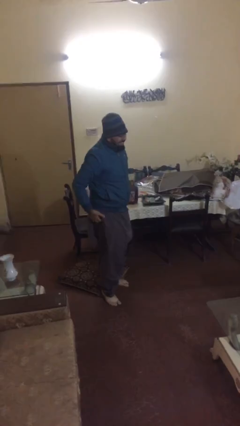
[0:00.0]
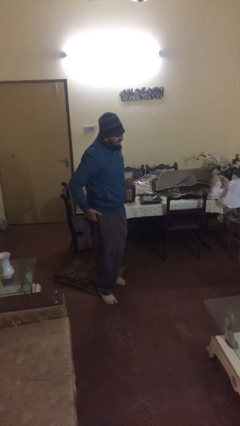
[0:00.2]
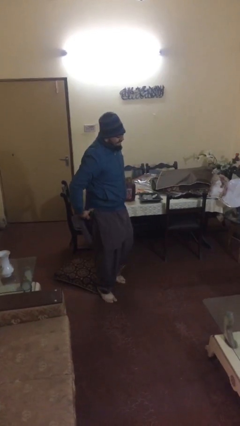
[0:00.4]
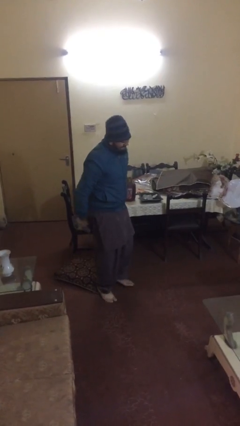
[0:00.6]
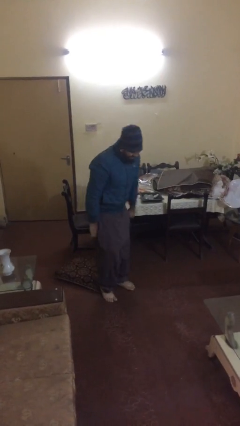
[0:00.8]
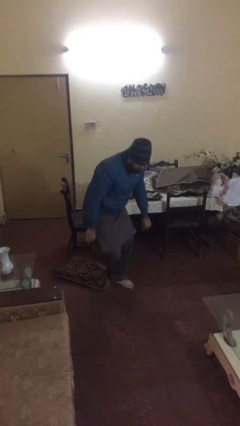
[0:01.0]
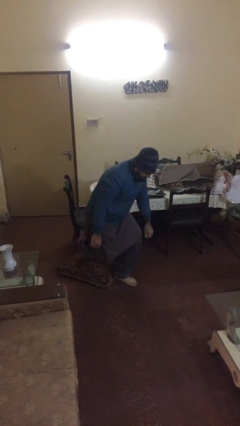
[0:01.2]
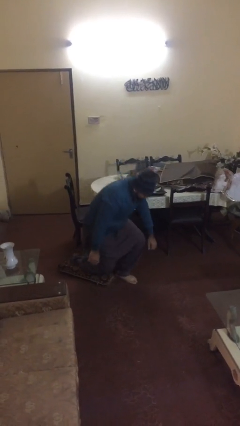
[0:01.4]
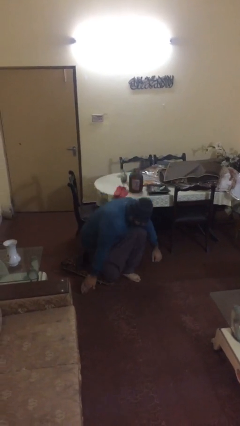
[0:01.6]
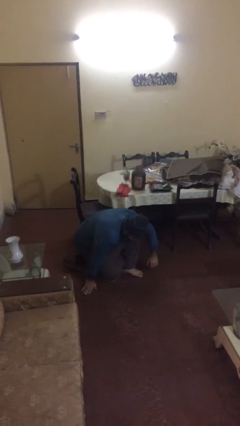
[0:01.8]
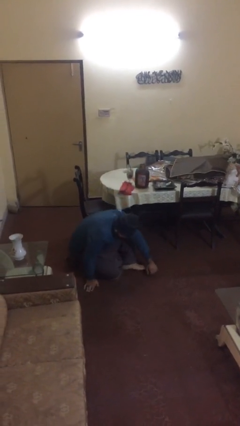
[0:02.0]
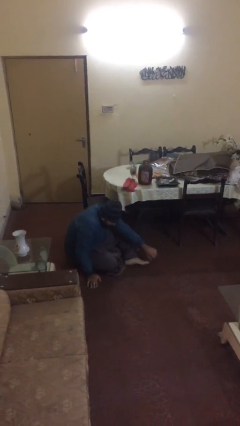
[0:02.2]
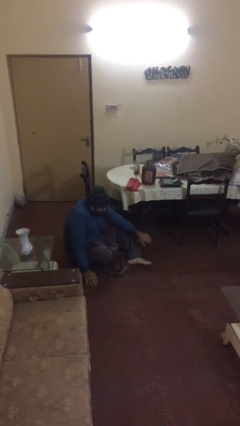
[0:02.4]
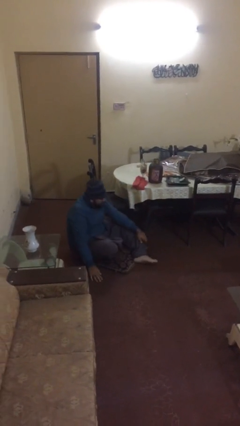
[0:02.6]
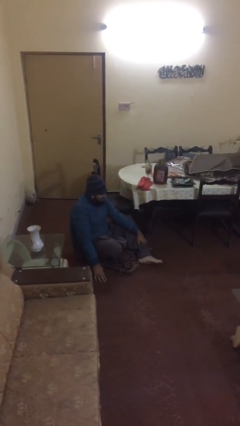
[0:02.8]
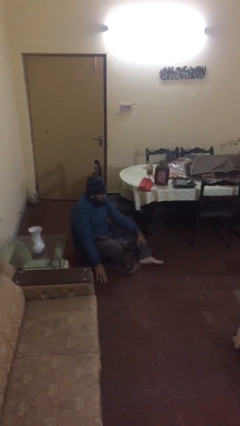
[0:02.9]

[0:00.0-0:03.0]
person sits down

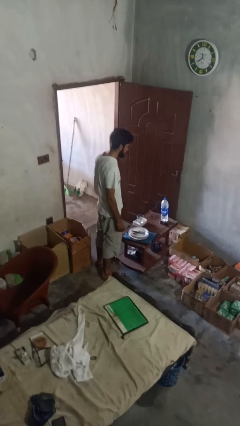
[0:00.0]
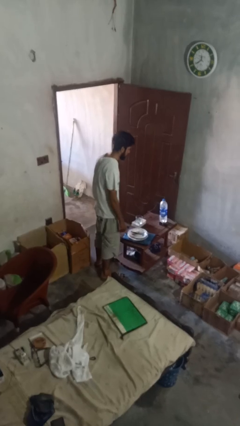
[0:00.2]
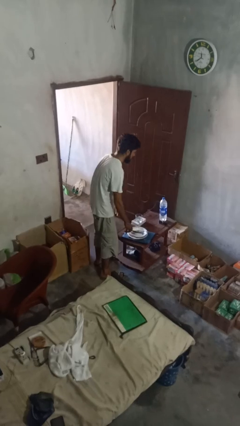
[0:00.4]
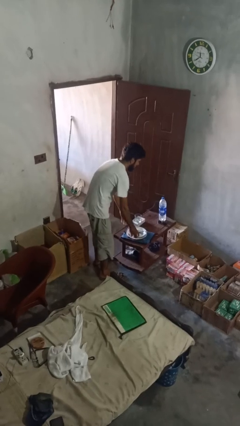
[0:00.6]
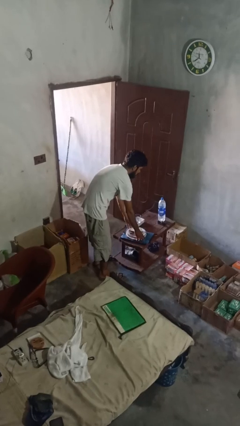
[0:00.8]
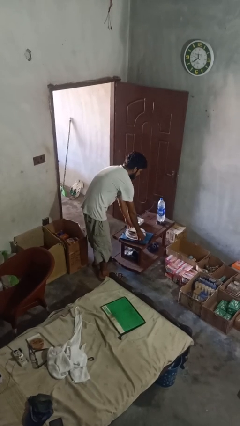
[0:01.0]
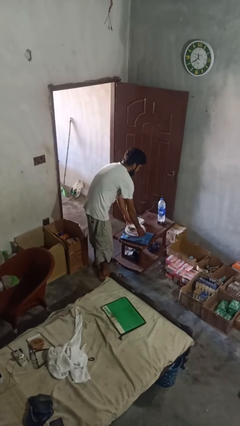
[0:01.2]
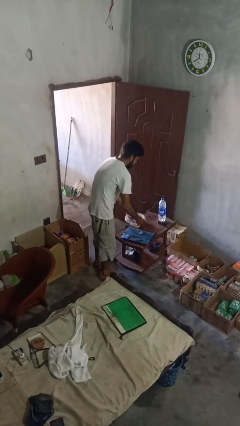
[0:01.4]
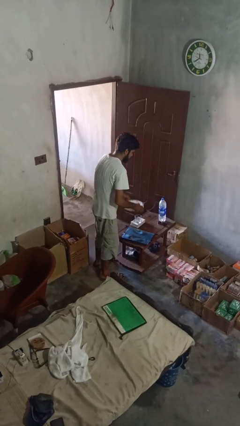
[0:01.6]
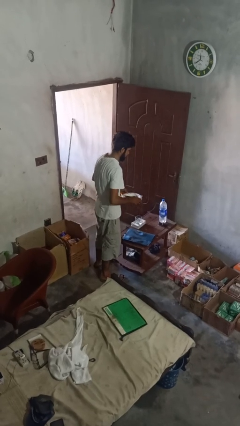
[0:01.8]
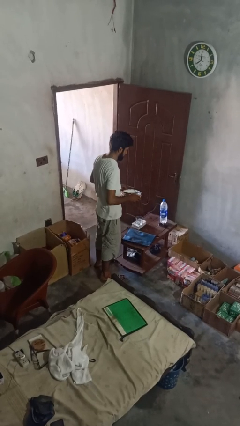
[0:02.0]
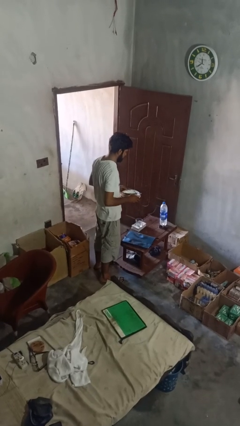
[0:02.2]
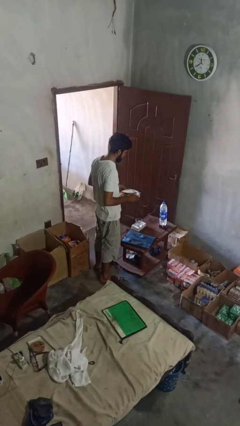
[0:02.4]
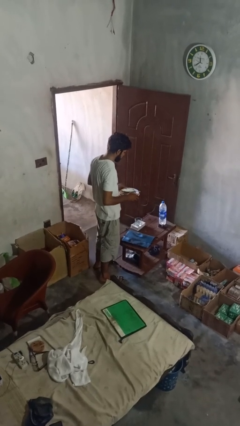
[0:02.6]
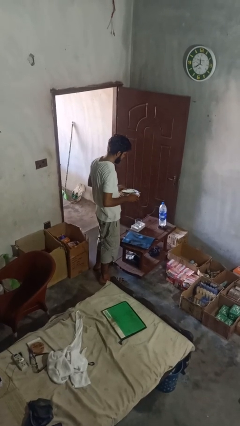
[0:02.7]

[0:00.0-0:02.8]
person picks up object from countertop

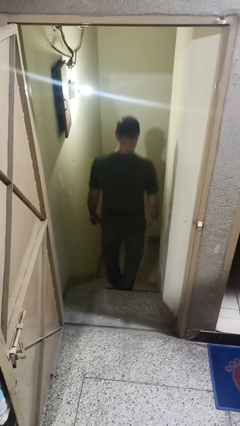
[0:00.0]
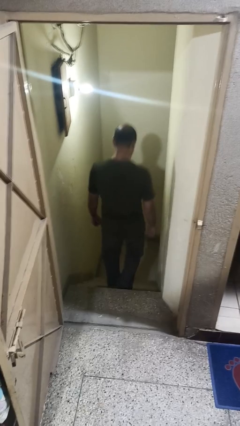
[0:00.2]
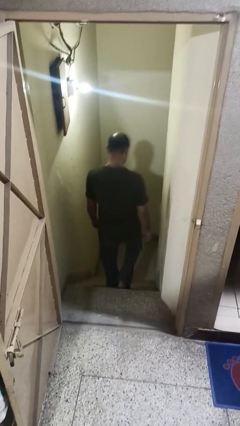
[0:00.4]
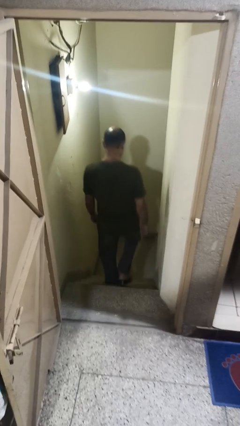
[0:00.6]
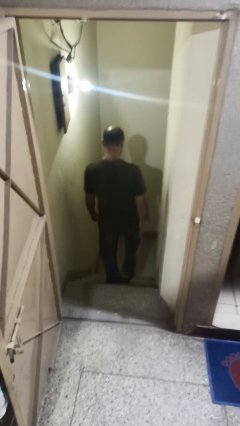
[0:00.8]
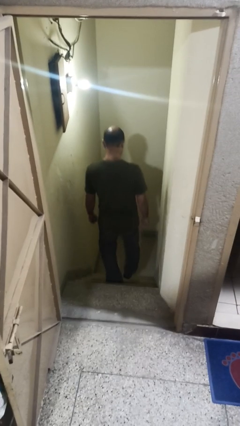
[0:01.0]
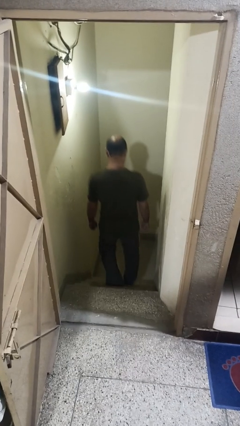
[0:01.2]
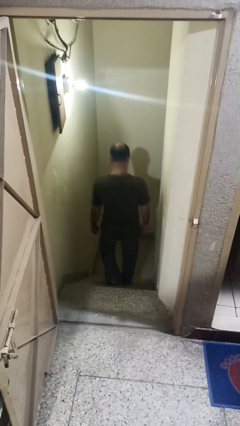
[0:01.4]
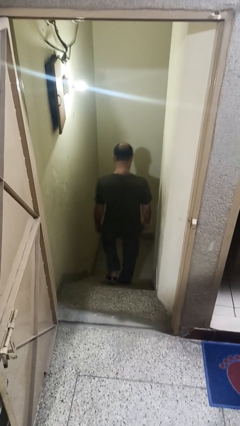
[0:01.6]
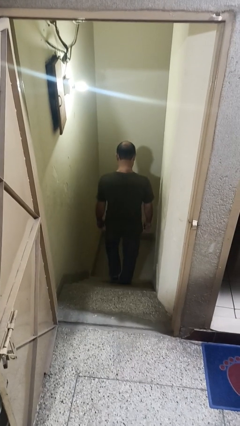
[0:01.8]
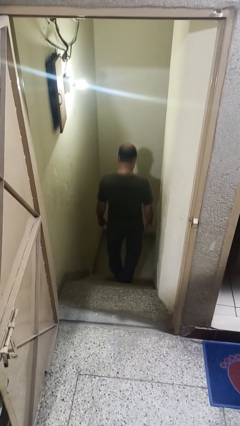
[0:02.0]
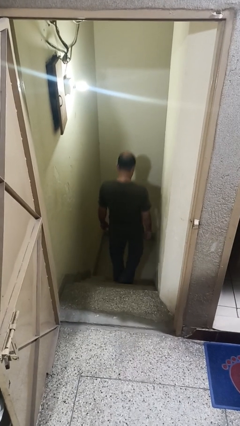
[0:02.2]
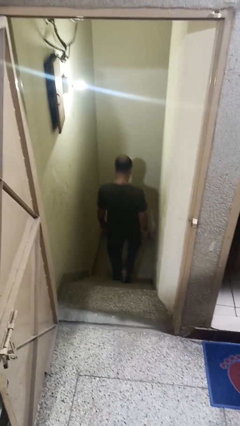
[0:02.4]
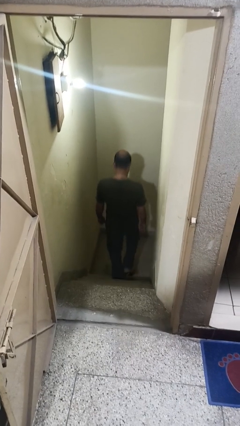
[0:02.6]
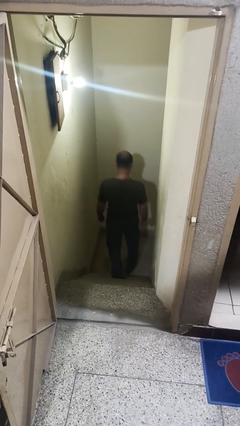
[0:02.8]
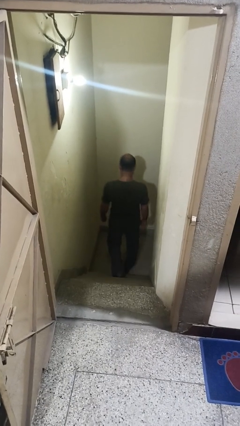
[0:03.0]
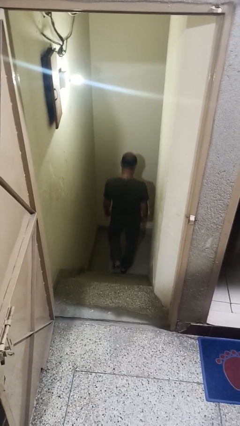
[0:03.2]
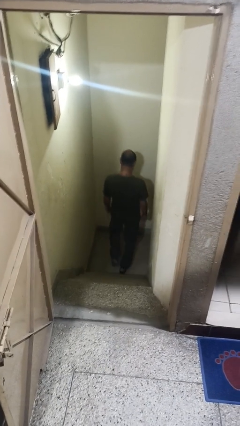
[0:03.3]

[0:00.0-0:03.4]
person climbs down stairs

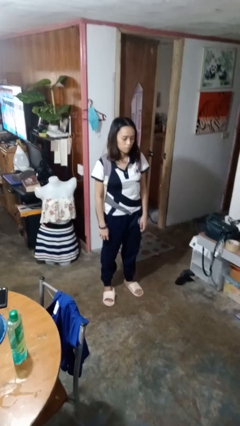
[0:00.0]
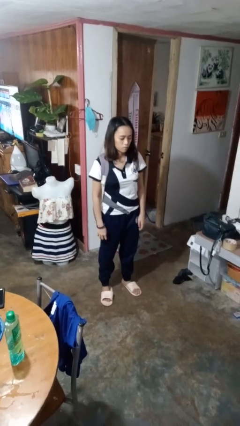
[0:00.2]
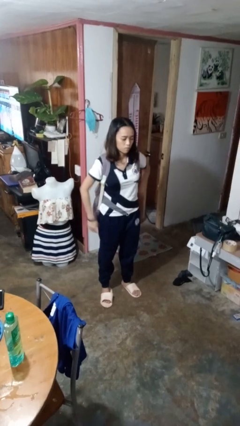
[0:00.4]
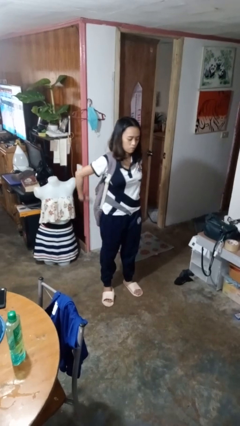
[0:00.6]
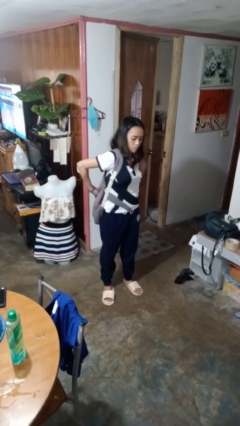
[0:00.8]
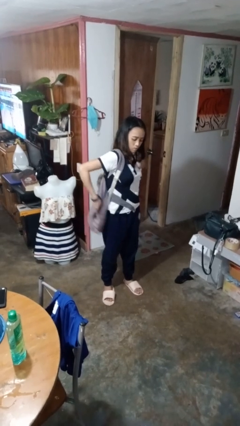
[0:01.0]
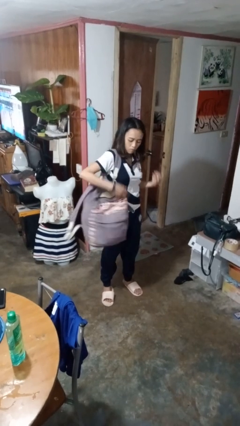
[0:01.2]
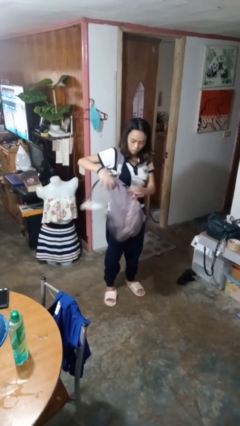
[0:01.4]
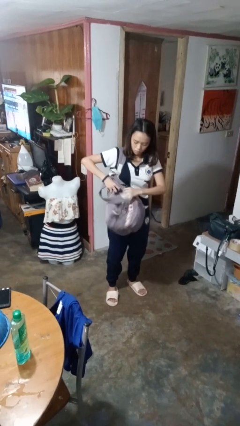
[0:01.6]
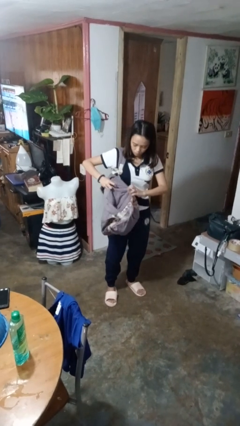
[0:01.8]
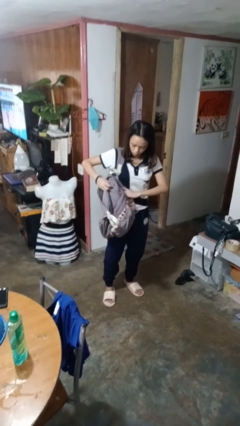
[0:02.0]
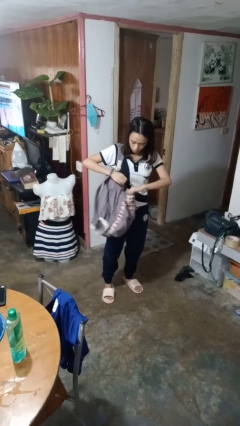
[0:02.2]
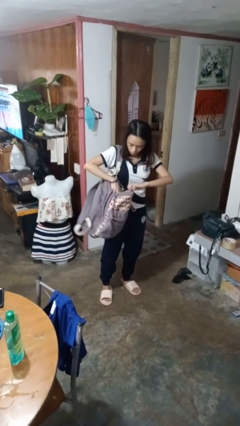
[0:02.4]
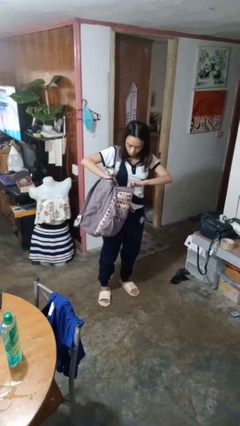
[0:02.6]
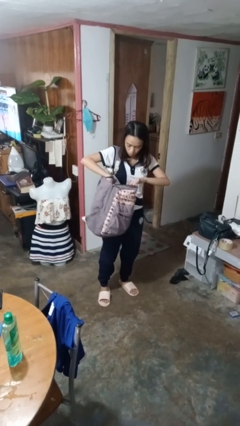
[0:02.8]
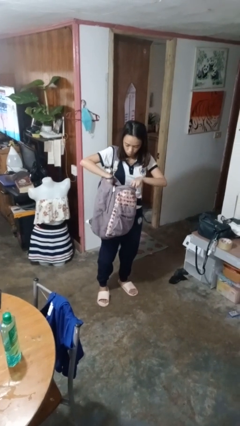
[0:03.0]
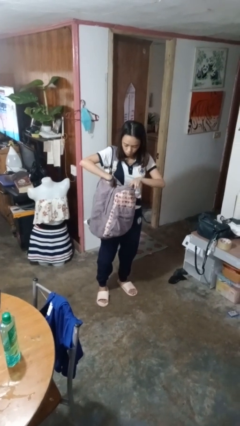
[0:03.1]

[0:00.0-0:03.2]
person searches in backpack

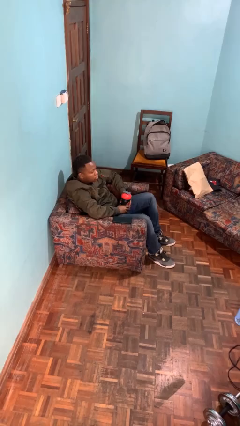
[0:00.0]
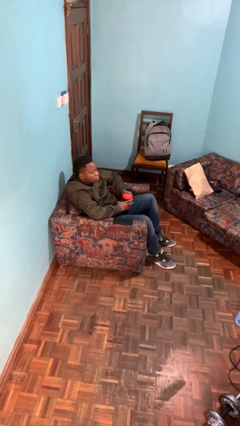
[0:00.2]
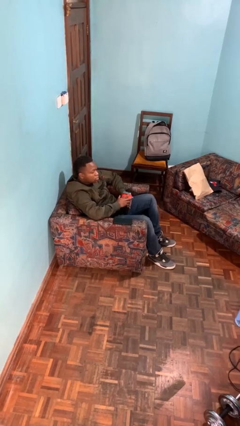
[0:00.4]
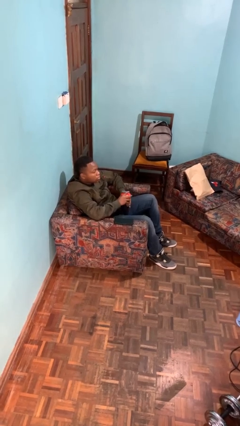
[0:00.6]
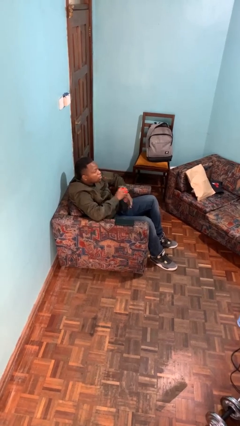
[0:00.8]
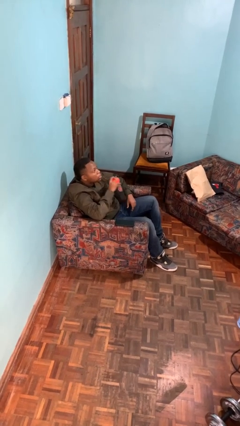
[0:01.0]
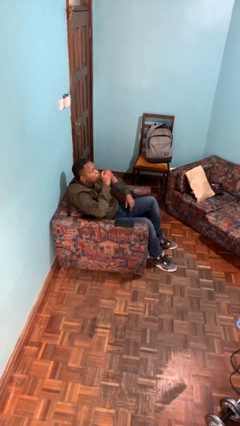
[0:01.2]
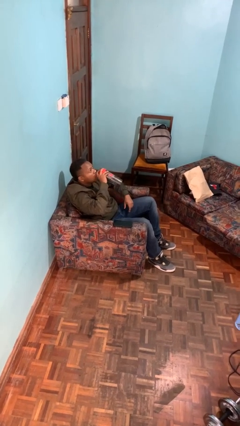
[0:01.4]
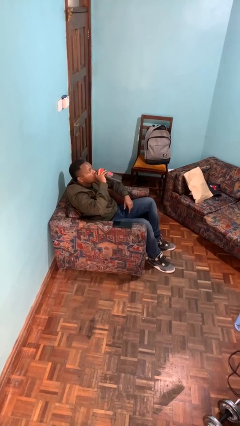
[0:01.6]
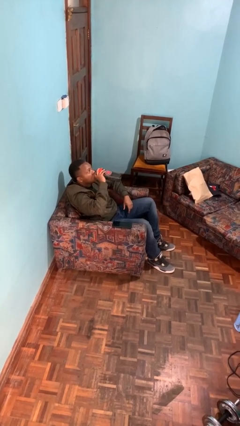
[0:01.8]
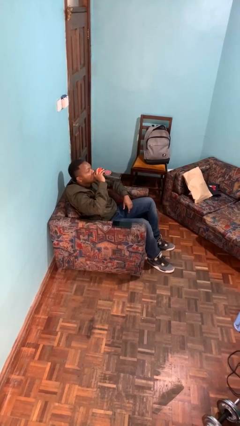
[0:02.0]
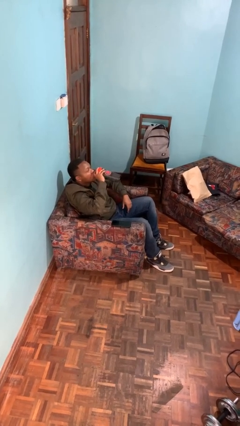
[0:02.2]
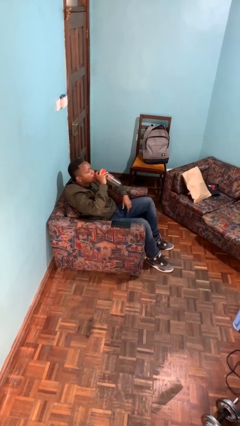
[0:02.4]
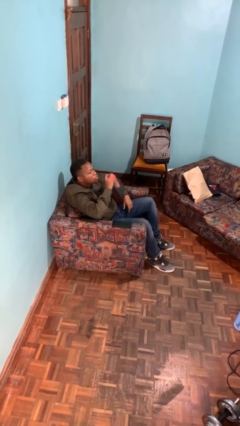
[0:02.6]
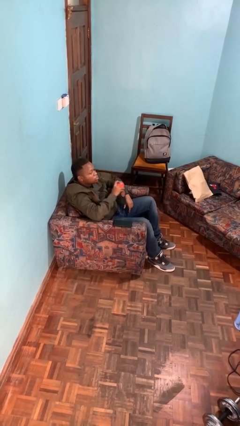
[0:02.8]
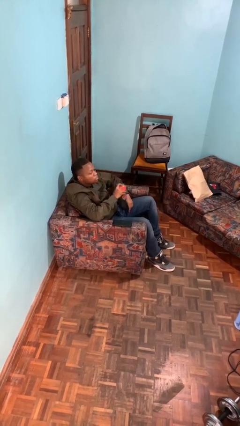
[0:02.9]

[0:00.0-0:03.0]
person drinks from bottle

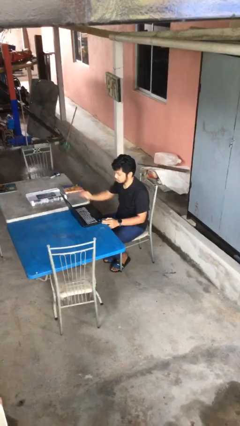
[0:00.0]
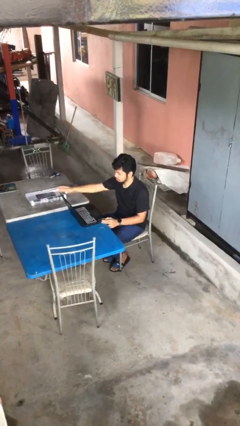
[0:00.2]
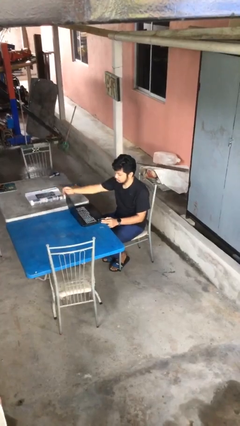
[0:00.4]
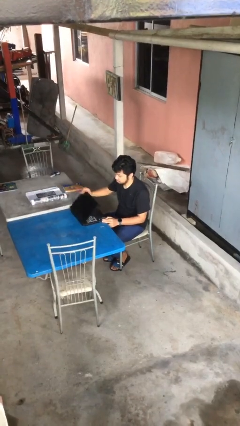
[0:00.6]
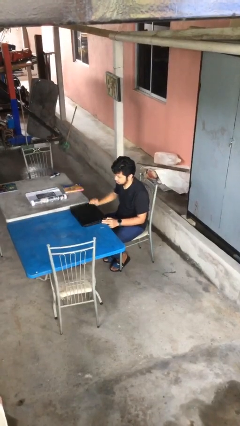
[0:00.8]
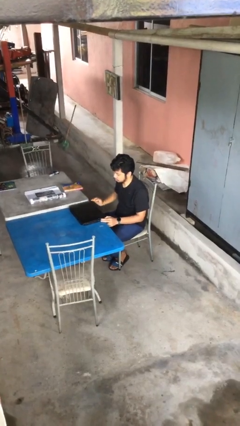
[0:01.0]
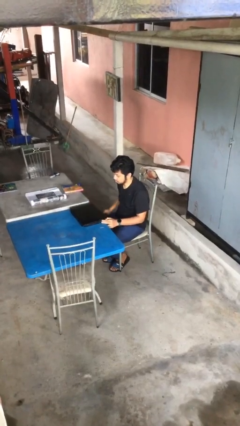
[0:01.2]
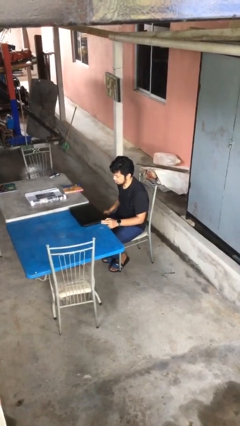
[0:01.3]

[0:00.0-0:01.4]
person closes laptop

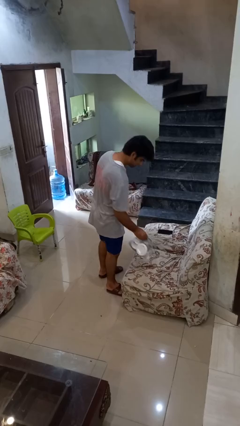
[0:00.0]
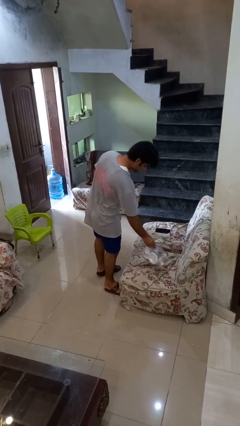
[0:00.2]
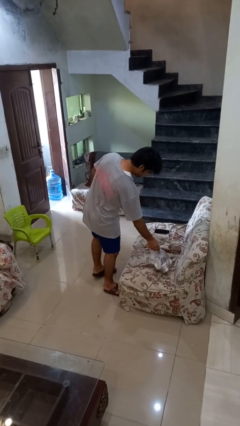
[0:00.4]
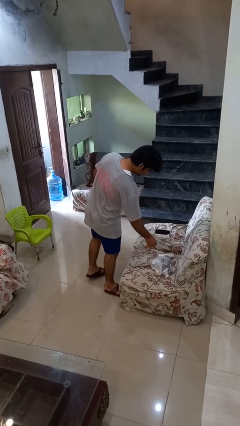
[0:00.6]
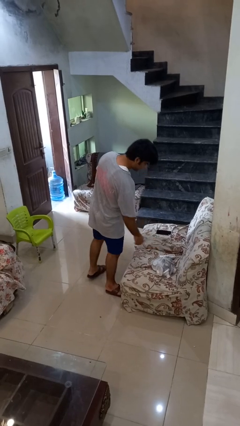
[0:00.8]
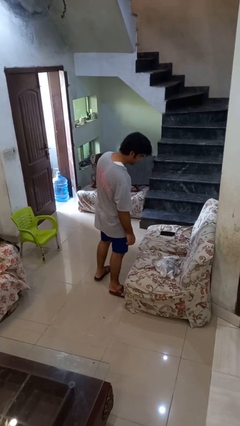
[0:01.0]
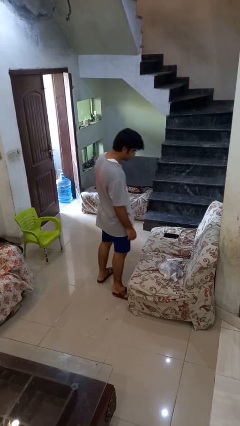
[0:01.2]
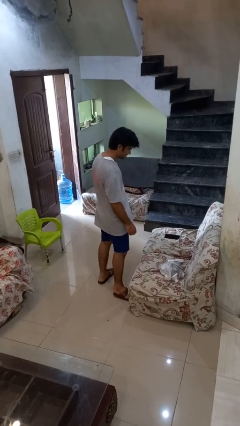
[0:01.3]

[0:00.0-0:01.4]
person puts down object on couch
